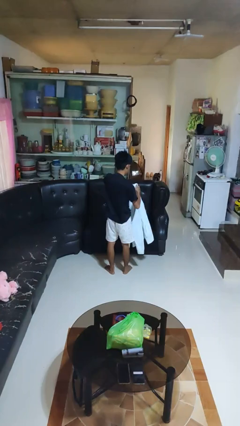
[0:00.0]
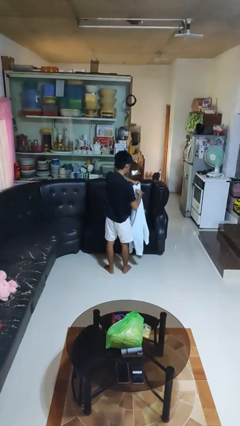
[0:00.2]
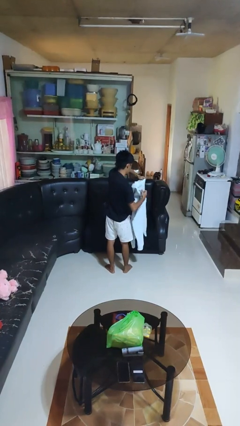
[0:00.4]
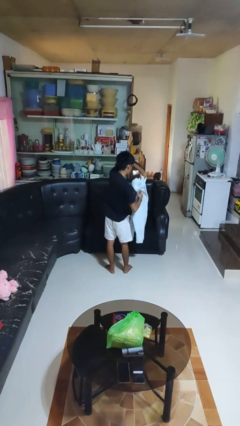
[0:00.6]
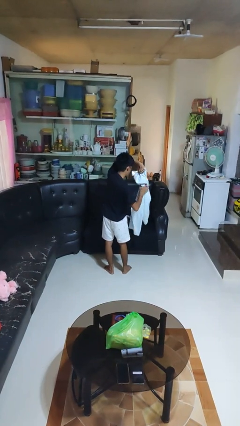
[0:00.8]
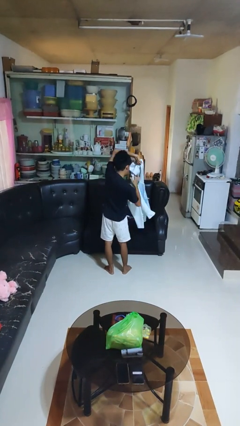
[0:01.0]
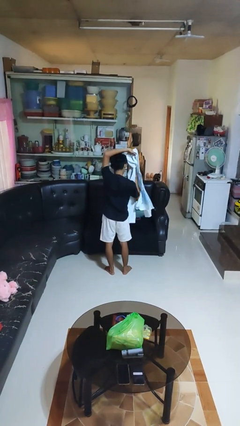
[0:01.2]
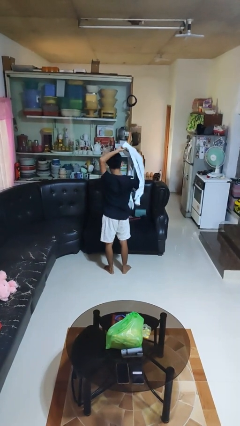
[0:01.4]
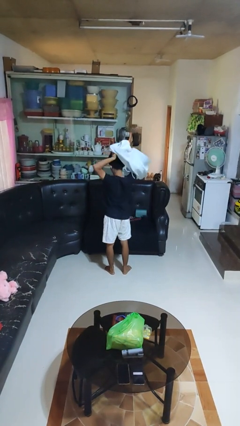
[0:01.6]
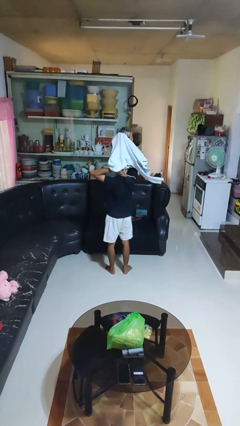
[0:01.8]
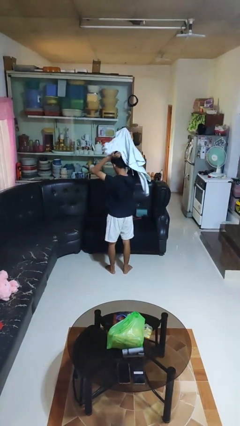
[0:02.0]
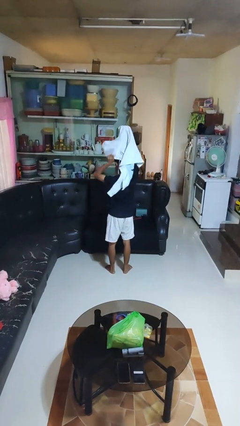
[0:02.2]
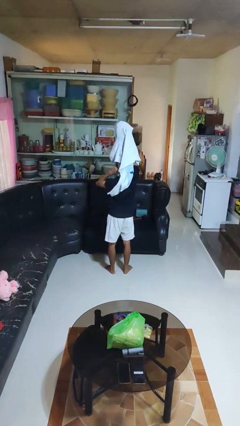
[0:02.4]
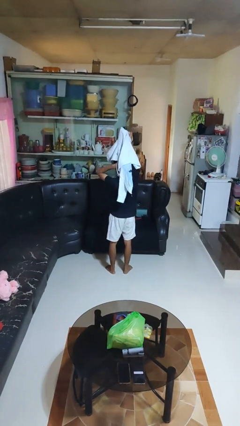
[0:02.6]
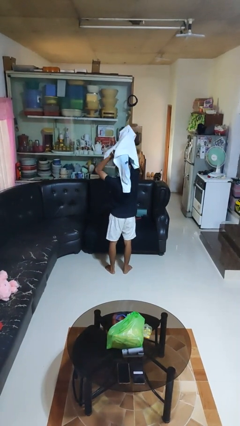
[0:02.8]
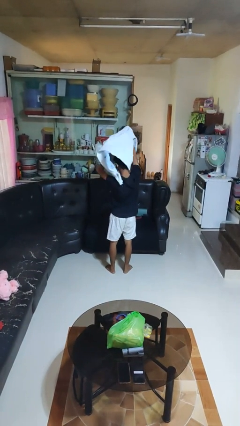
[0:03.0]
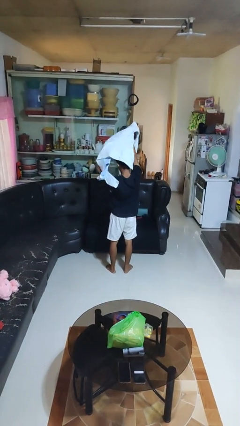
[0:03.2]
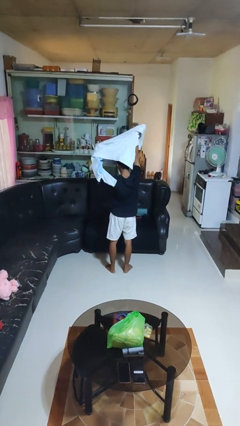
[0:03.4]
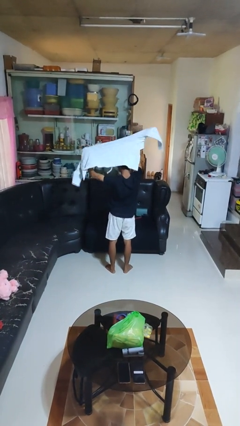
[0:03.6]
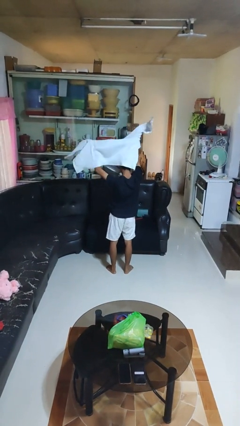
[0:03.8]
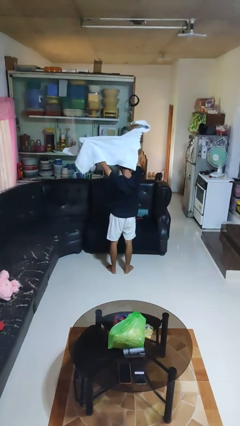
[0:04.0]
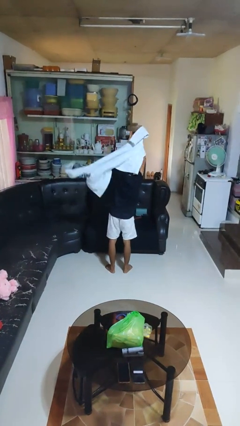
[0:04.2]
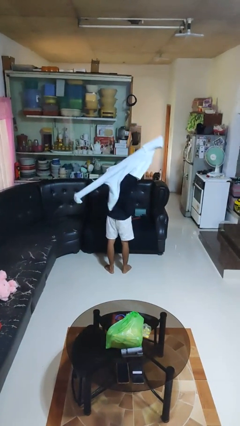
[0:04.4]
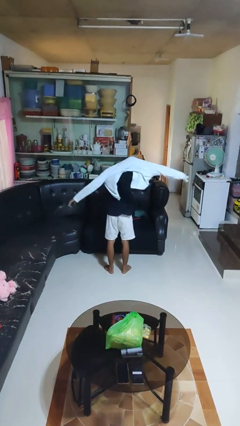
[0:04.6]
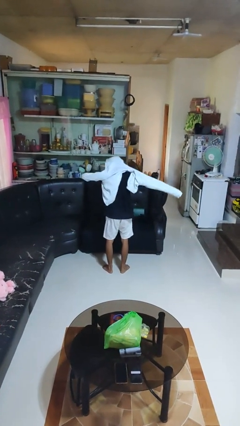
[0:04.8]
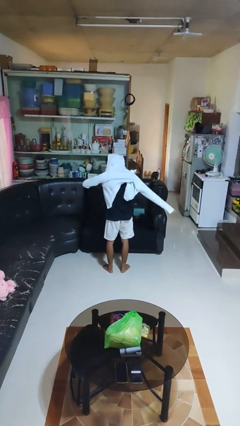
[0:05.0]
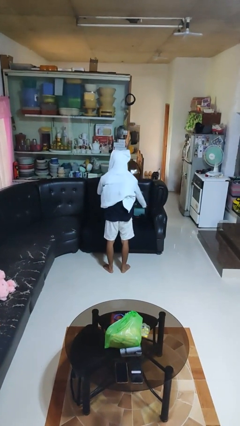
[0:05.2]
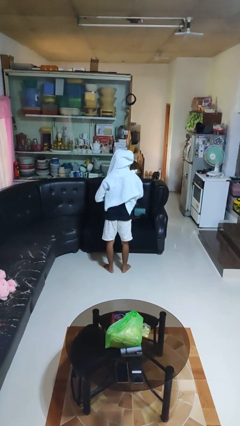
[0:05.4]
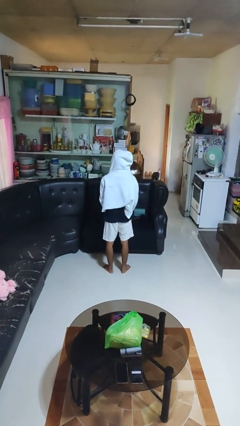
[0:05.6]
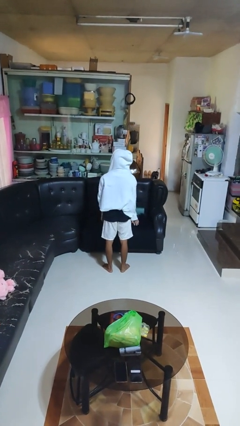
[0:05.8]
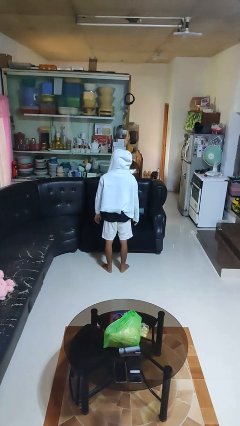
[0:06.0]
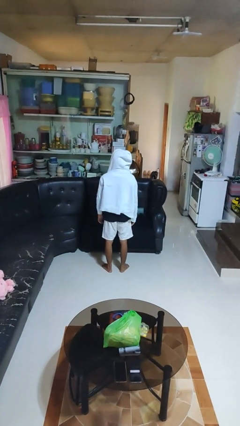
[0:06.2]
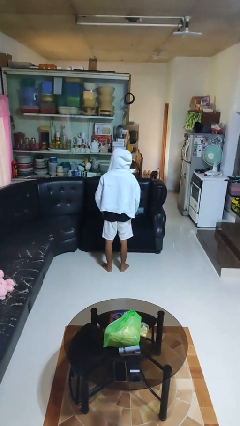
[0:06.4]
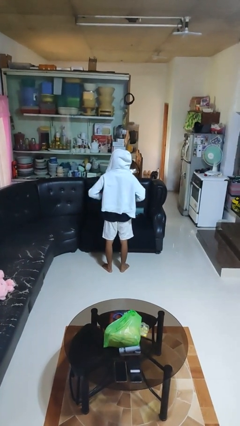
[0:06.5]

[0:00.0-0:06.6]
person puts on hoodie

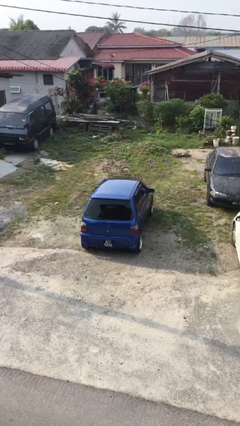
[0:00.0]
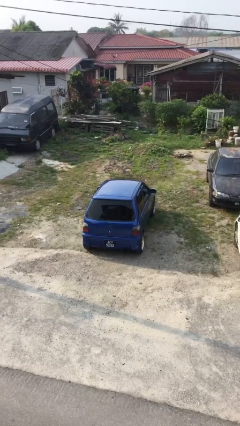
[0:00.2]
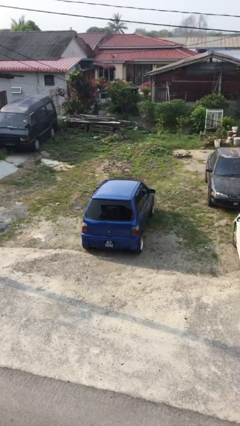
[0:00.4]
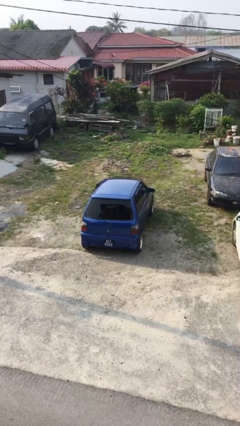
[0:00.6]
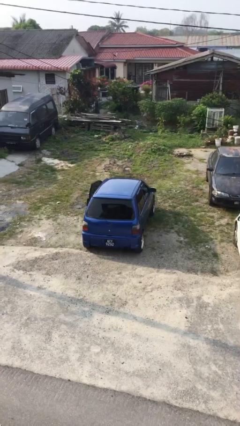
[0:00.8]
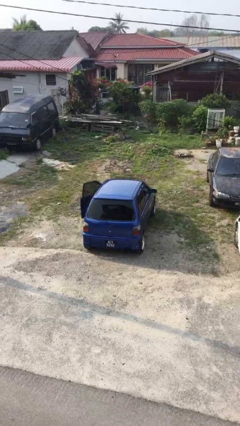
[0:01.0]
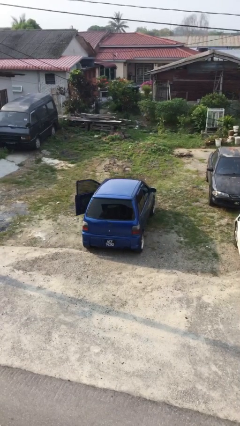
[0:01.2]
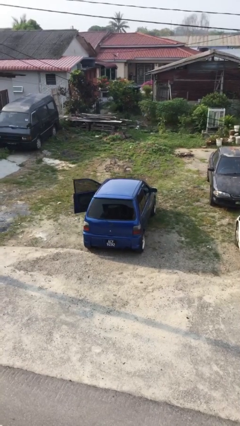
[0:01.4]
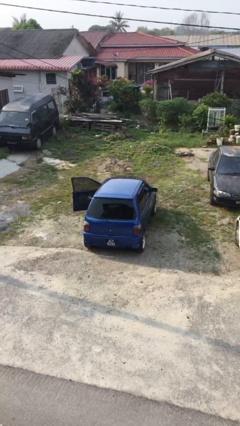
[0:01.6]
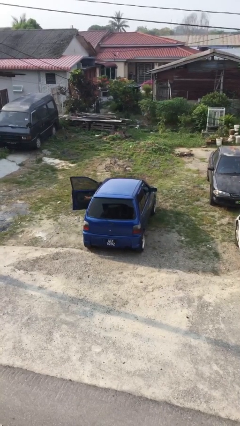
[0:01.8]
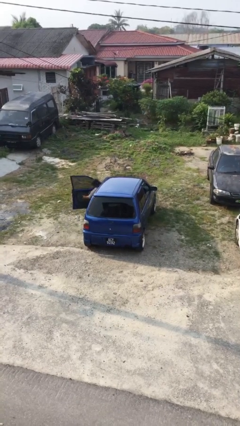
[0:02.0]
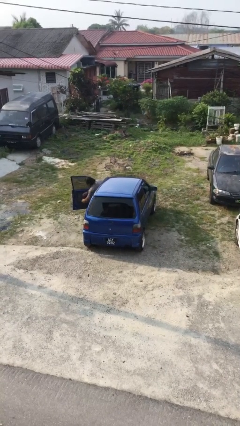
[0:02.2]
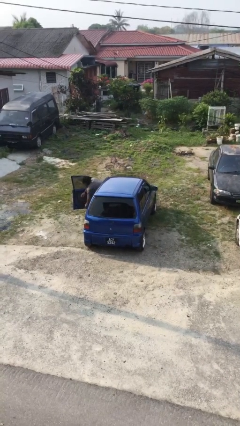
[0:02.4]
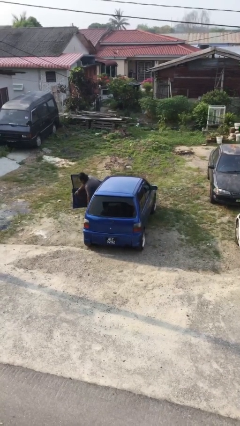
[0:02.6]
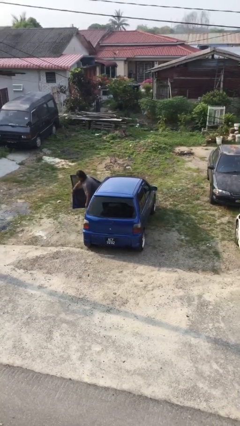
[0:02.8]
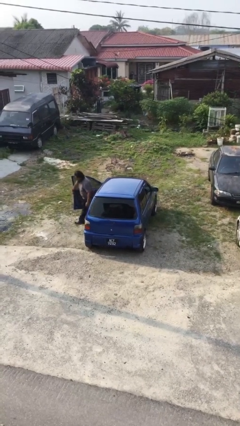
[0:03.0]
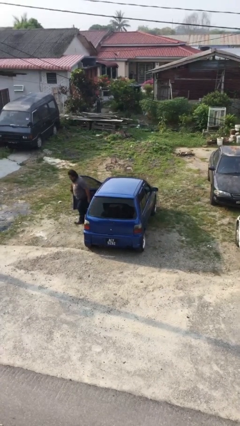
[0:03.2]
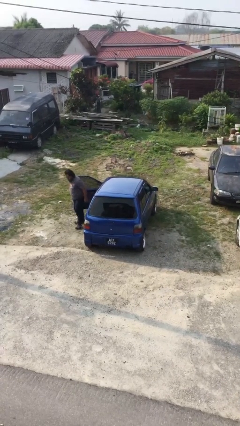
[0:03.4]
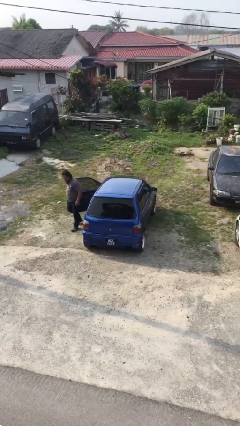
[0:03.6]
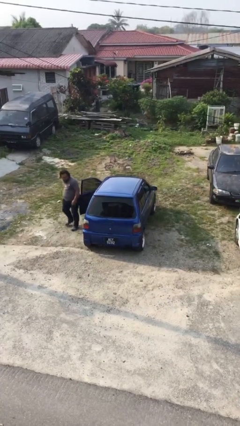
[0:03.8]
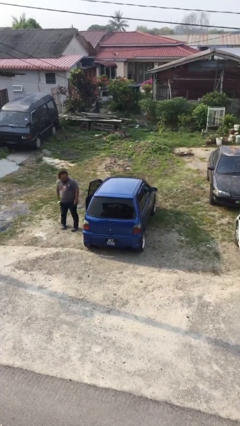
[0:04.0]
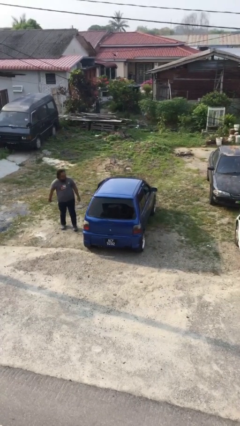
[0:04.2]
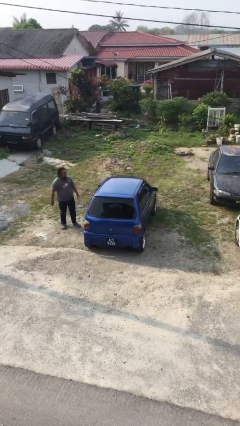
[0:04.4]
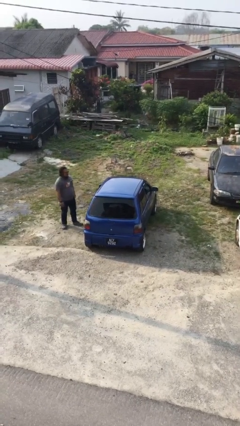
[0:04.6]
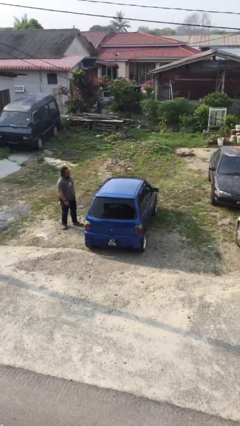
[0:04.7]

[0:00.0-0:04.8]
car drops off person

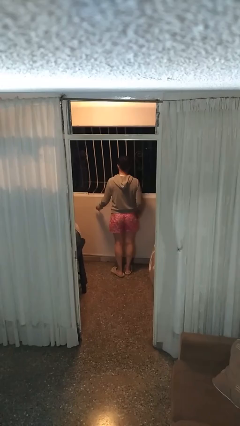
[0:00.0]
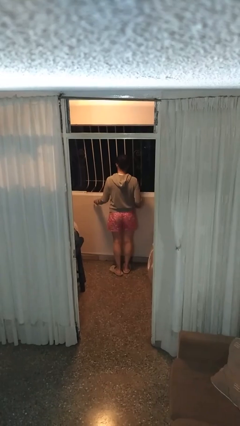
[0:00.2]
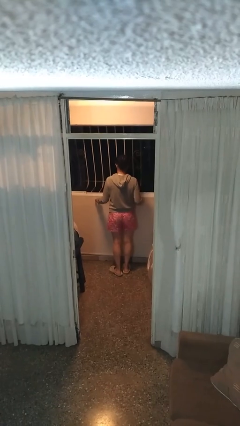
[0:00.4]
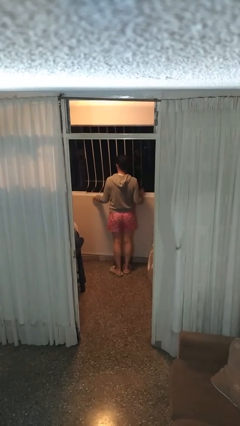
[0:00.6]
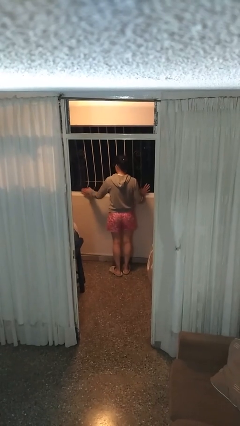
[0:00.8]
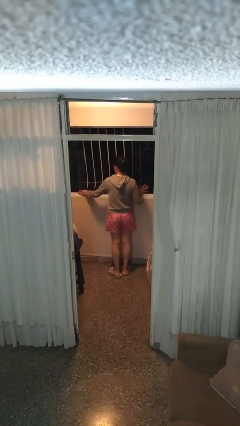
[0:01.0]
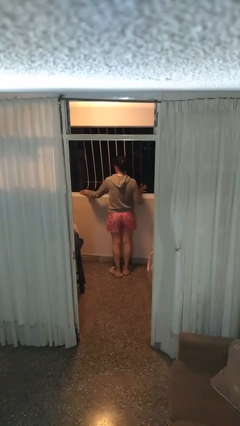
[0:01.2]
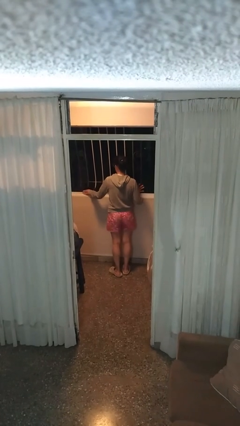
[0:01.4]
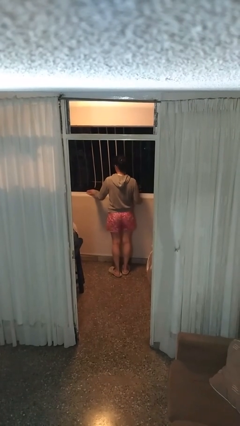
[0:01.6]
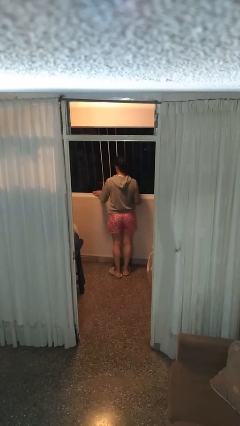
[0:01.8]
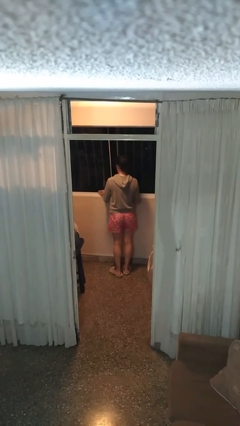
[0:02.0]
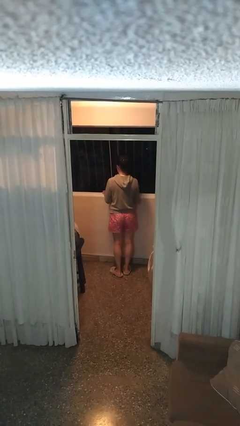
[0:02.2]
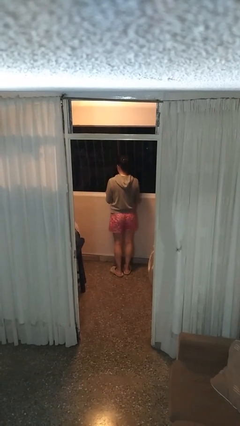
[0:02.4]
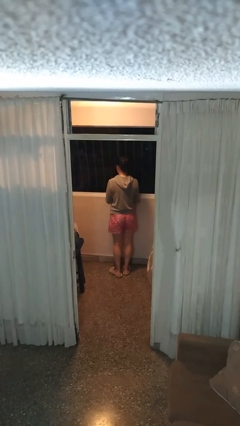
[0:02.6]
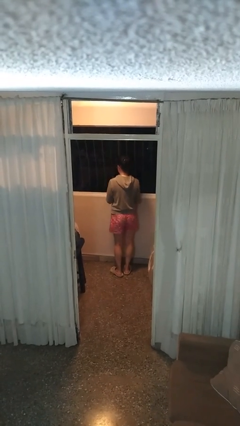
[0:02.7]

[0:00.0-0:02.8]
person closes home window

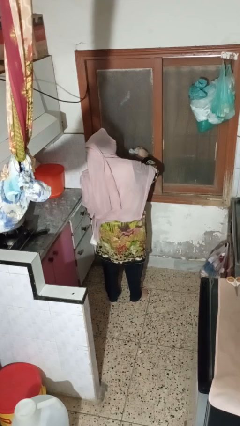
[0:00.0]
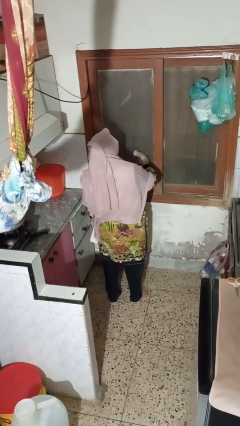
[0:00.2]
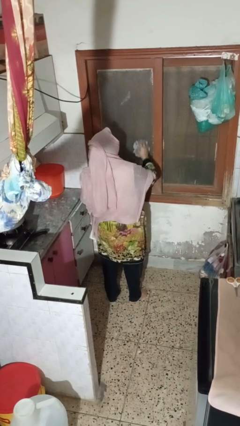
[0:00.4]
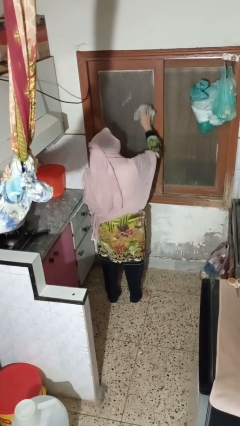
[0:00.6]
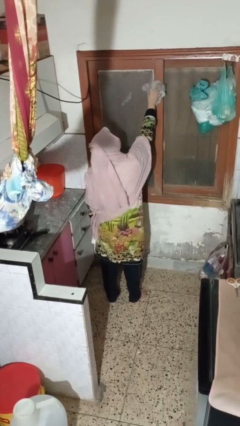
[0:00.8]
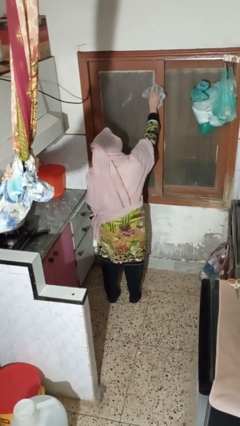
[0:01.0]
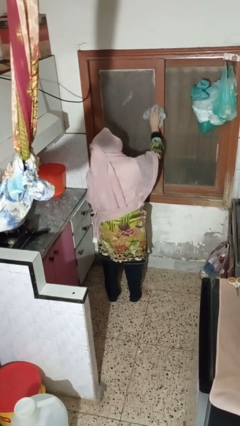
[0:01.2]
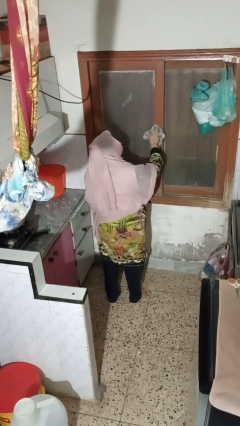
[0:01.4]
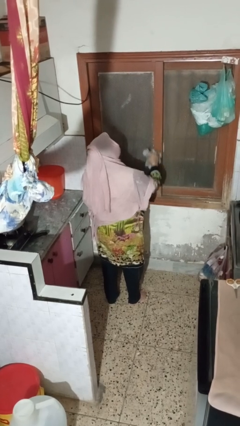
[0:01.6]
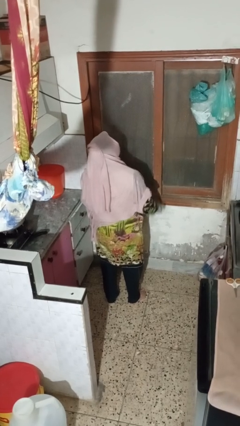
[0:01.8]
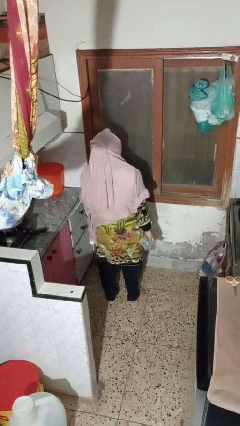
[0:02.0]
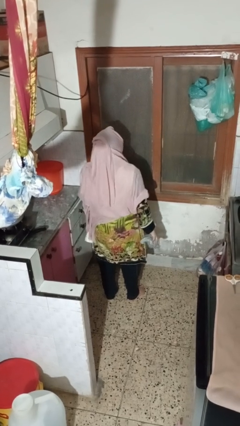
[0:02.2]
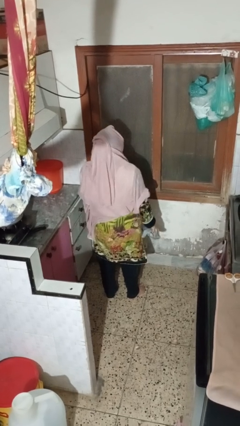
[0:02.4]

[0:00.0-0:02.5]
person washes window

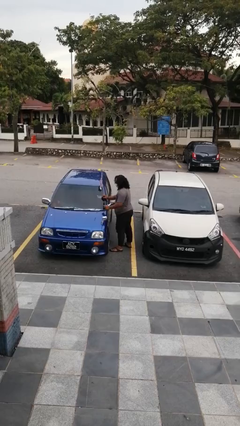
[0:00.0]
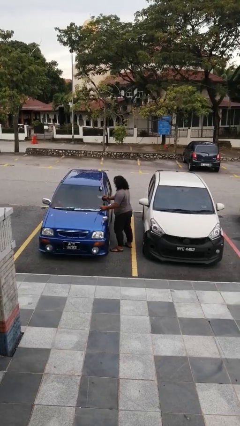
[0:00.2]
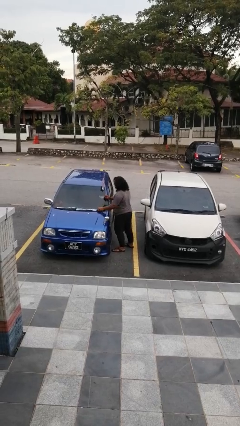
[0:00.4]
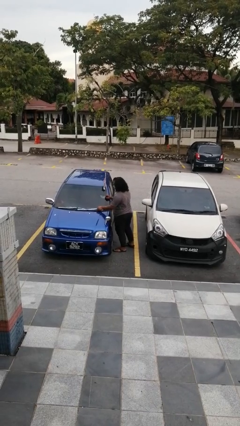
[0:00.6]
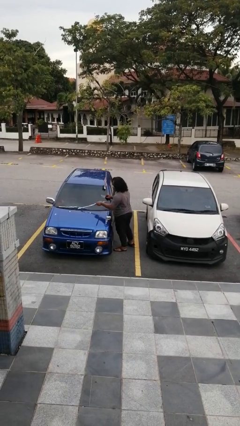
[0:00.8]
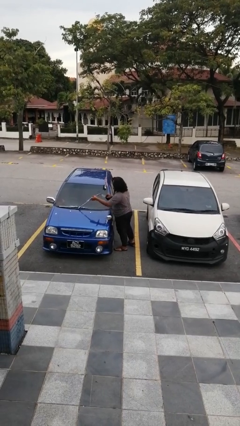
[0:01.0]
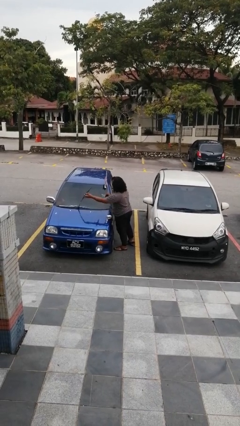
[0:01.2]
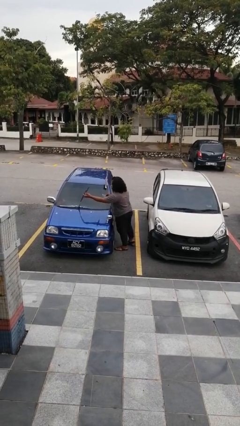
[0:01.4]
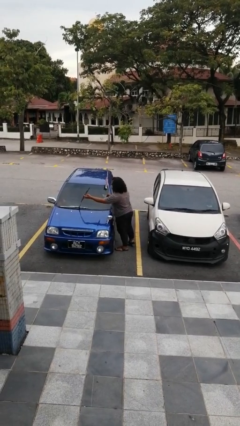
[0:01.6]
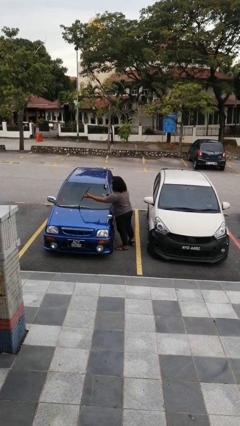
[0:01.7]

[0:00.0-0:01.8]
person flips up car wipers
